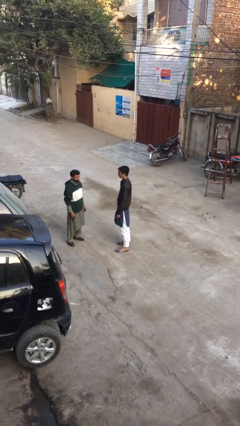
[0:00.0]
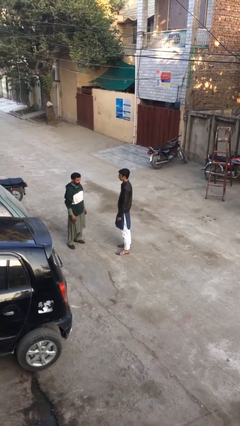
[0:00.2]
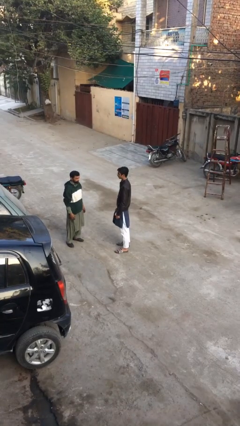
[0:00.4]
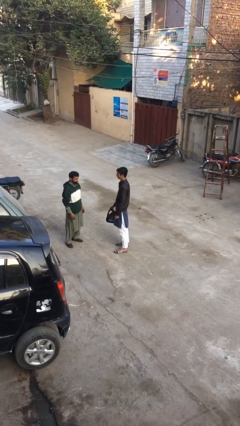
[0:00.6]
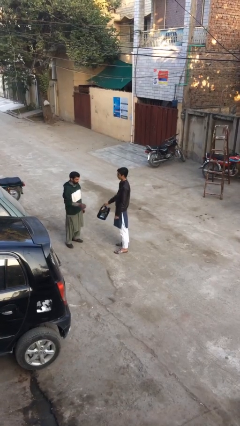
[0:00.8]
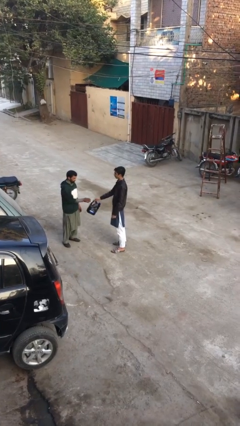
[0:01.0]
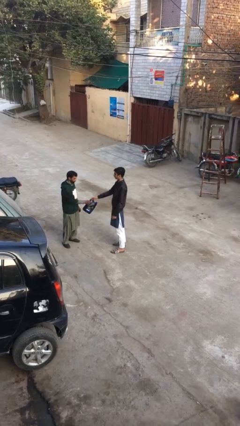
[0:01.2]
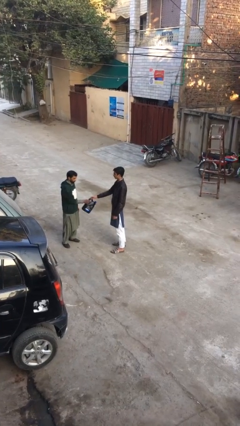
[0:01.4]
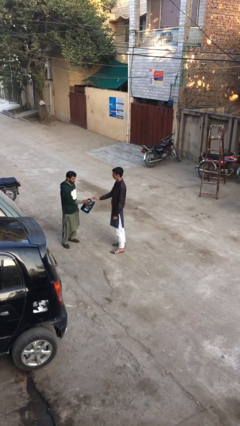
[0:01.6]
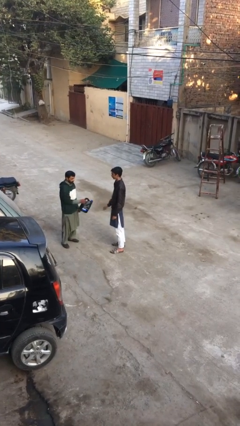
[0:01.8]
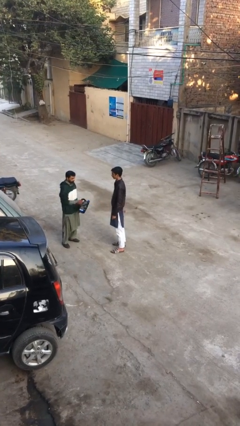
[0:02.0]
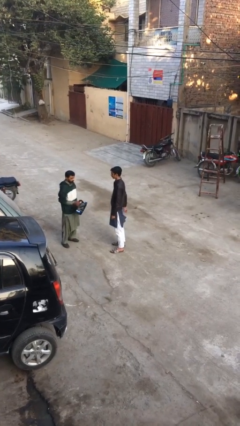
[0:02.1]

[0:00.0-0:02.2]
person transfers object to person

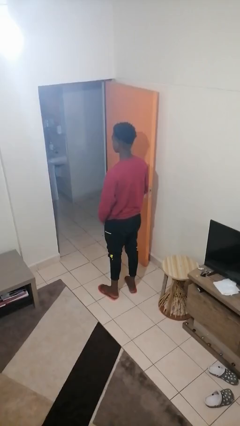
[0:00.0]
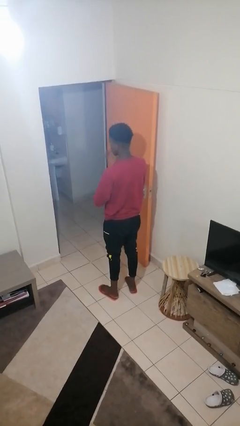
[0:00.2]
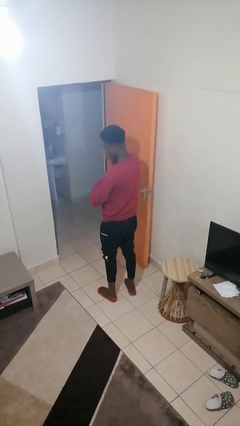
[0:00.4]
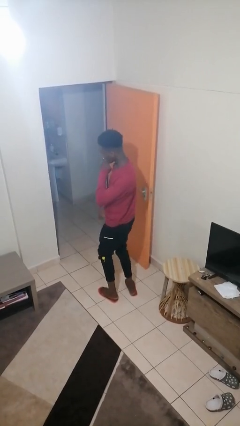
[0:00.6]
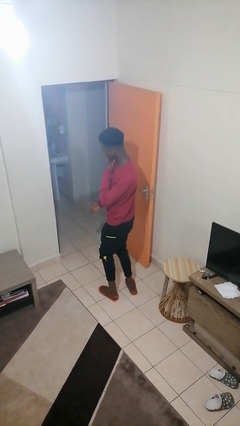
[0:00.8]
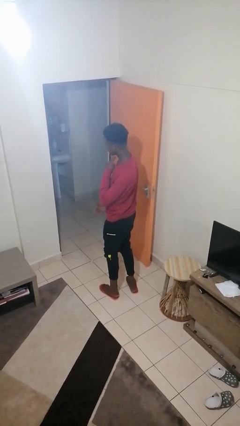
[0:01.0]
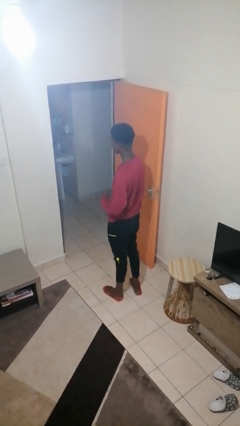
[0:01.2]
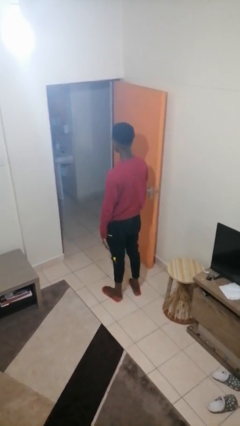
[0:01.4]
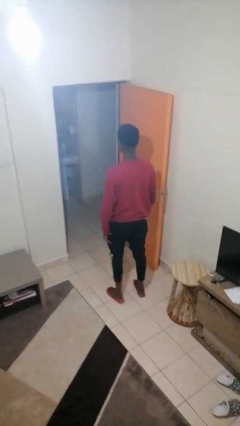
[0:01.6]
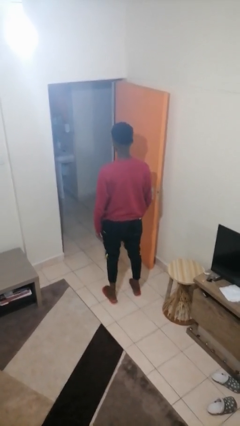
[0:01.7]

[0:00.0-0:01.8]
person karate chop

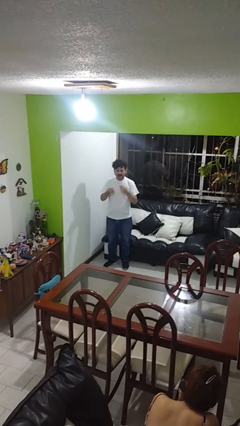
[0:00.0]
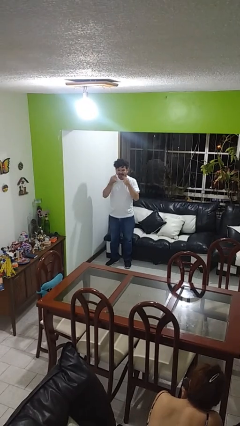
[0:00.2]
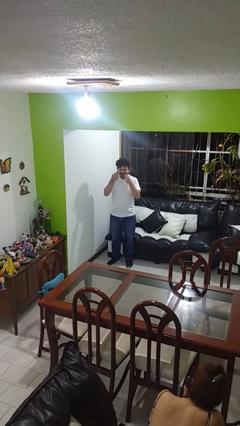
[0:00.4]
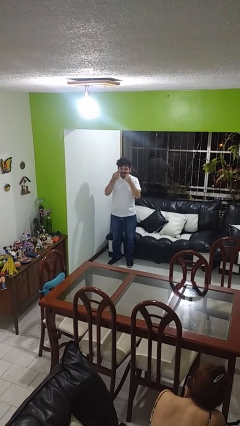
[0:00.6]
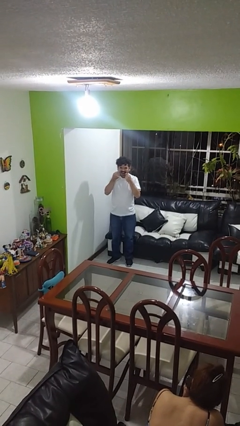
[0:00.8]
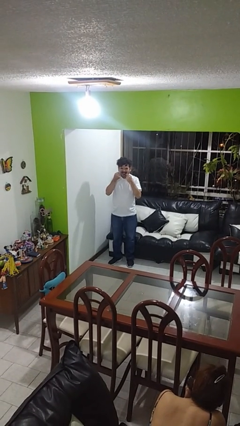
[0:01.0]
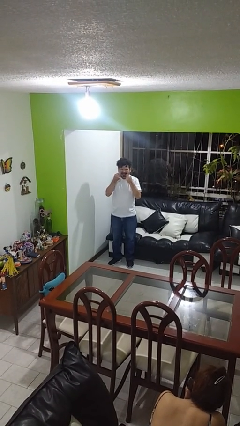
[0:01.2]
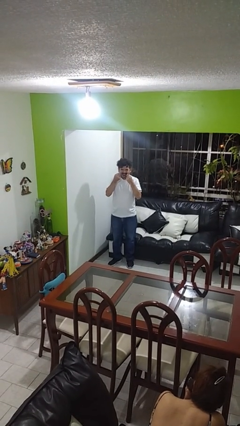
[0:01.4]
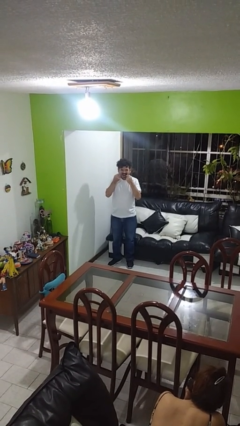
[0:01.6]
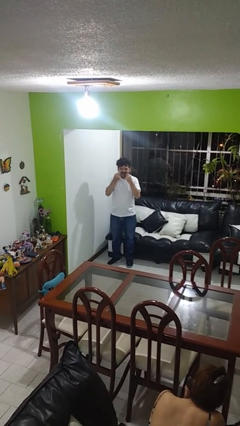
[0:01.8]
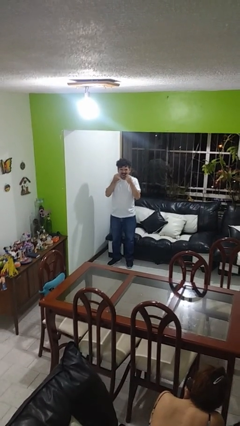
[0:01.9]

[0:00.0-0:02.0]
person flosses

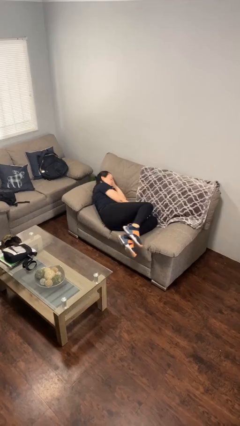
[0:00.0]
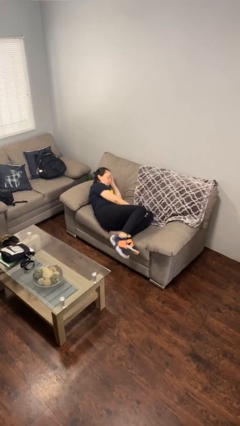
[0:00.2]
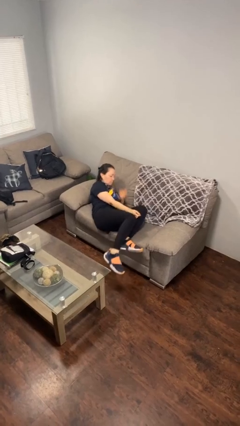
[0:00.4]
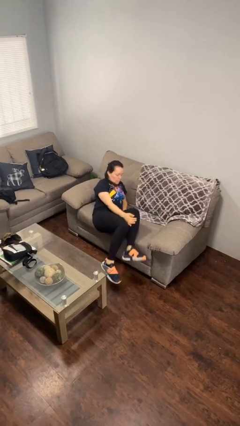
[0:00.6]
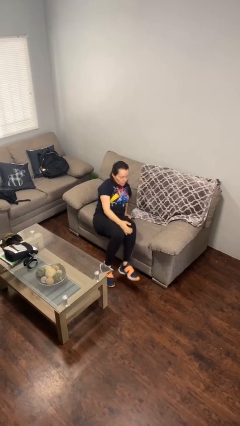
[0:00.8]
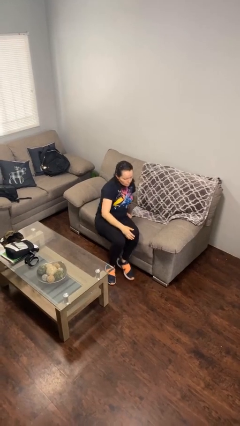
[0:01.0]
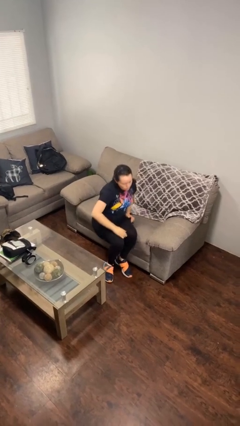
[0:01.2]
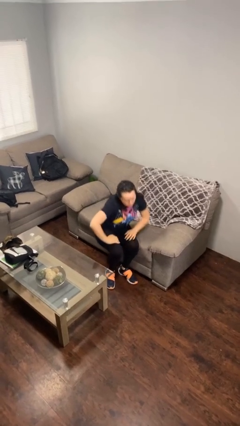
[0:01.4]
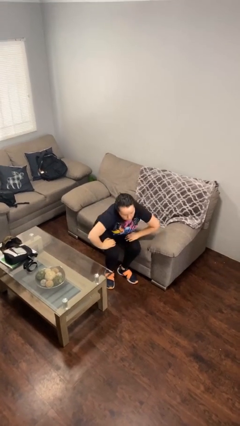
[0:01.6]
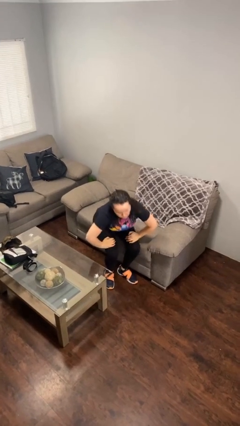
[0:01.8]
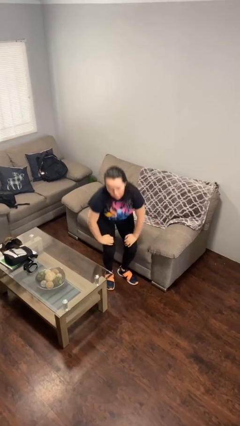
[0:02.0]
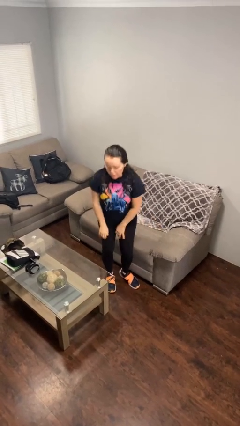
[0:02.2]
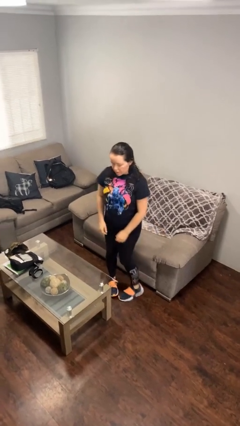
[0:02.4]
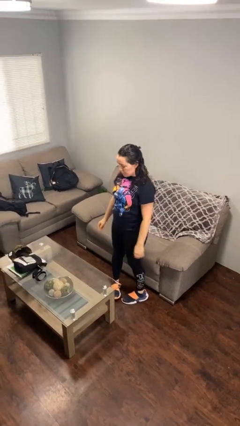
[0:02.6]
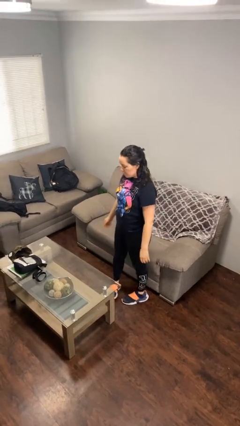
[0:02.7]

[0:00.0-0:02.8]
person stands up

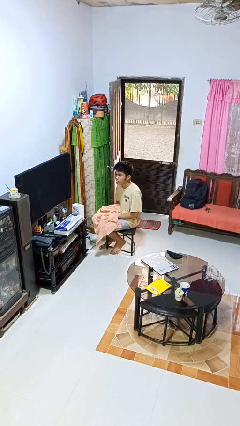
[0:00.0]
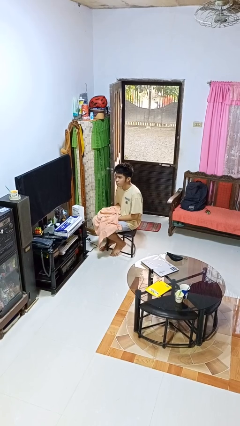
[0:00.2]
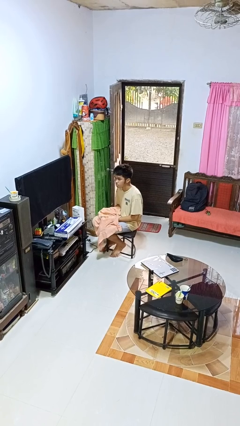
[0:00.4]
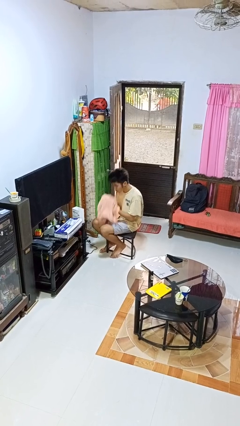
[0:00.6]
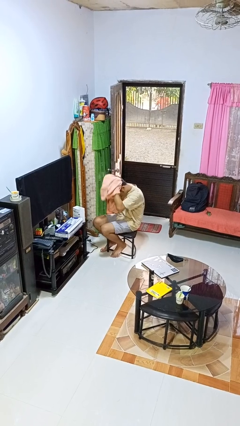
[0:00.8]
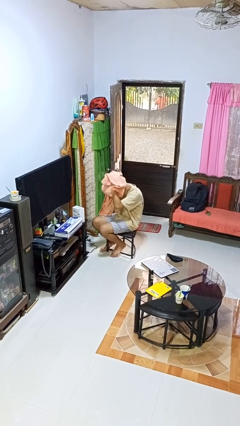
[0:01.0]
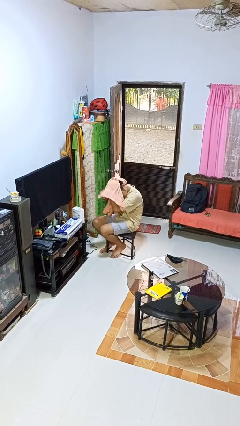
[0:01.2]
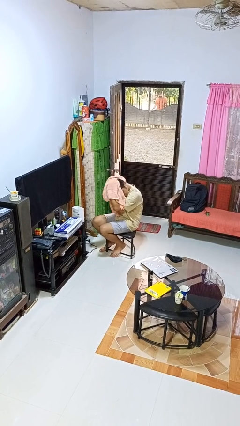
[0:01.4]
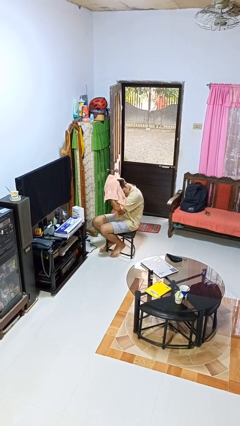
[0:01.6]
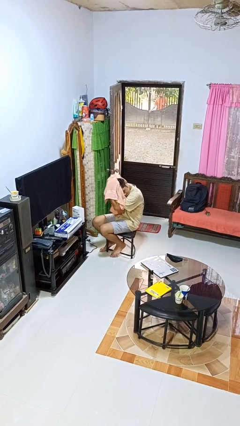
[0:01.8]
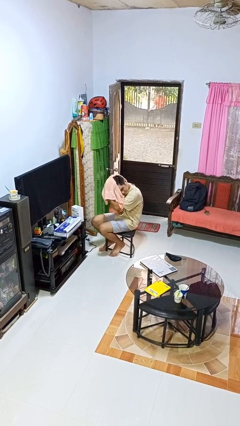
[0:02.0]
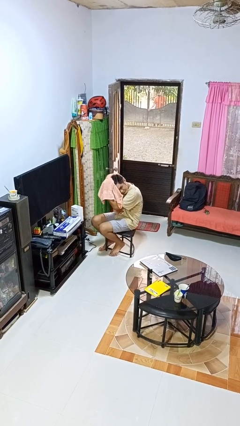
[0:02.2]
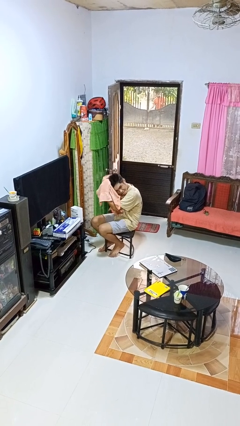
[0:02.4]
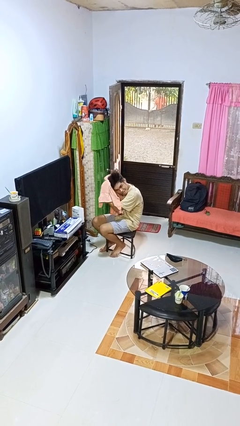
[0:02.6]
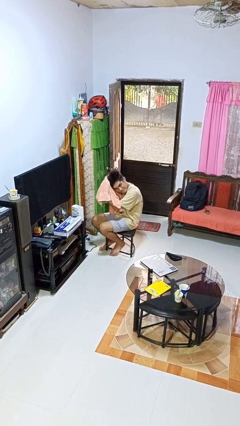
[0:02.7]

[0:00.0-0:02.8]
person dries hair with towel

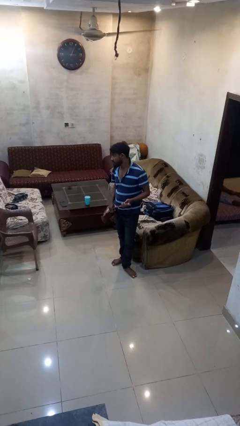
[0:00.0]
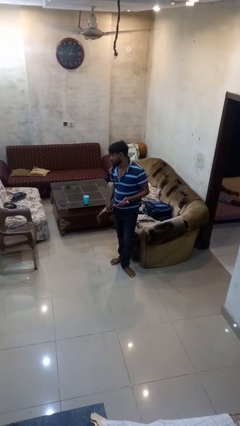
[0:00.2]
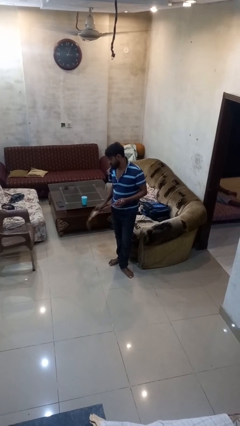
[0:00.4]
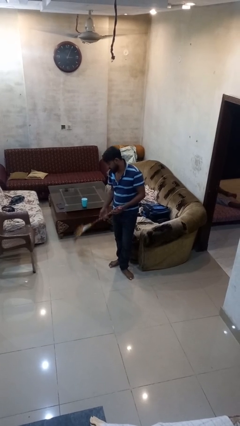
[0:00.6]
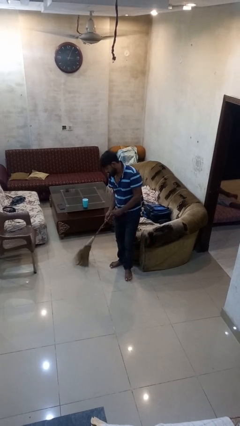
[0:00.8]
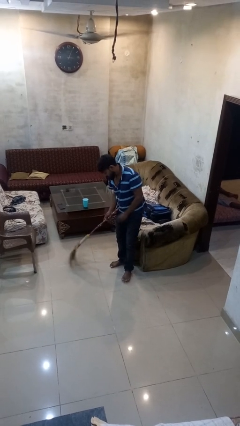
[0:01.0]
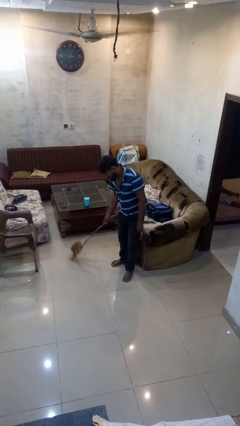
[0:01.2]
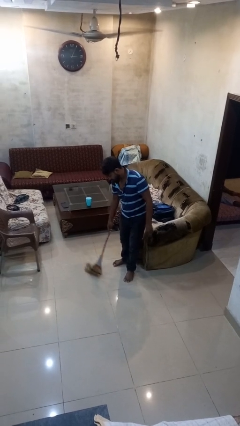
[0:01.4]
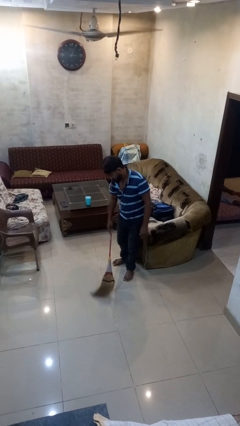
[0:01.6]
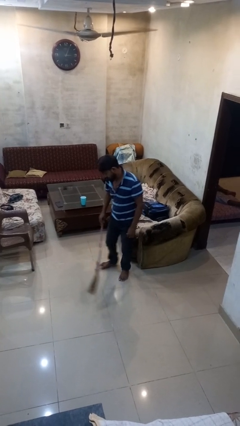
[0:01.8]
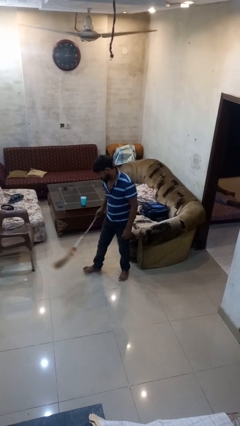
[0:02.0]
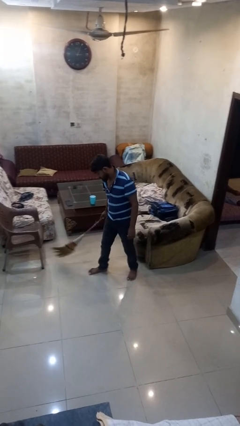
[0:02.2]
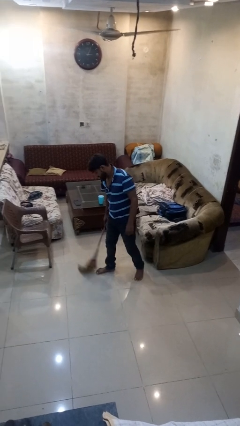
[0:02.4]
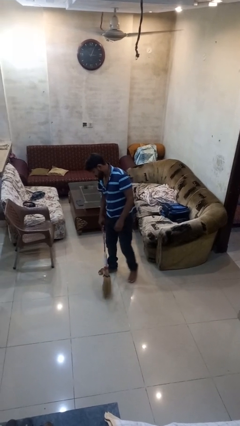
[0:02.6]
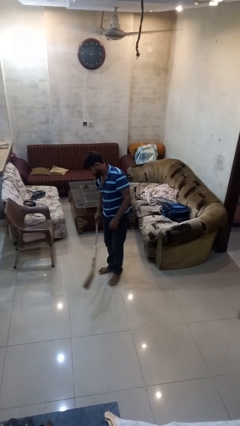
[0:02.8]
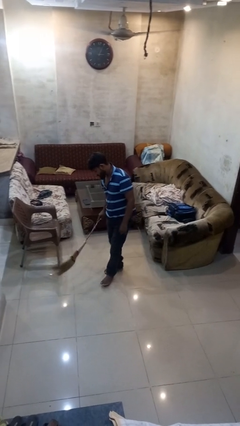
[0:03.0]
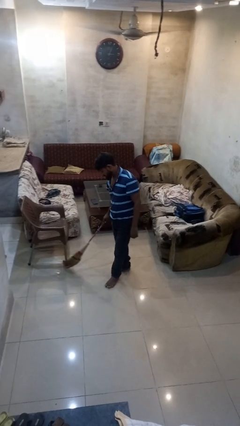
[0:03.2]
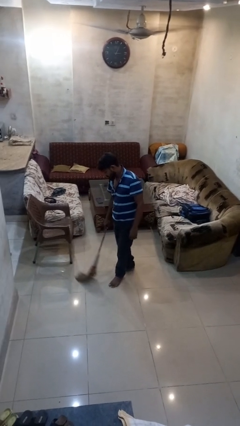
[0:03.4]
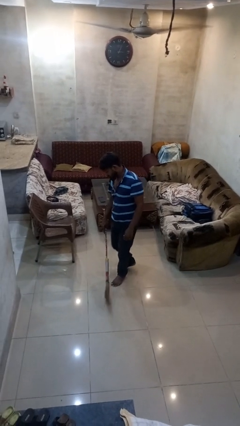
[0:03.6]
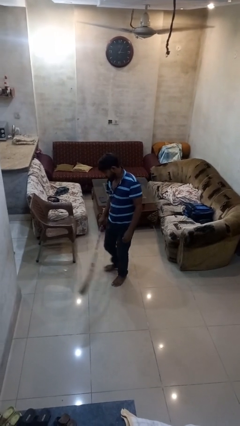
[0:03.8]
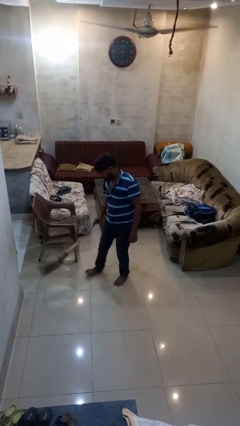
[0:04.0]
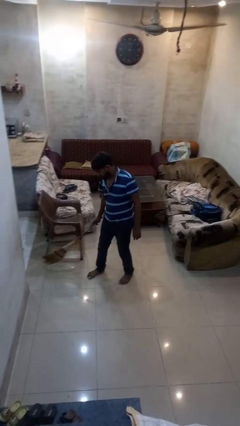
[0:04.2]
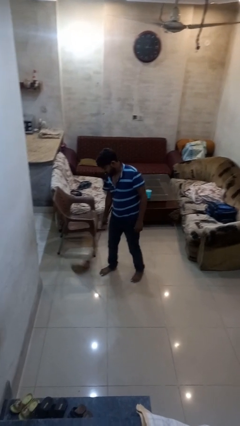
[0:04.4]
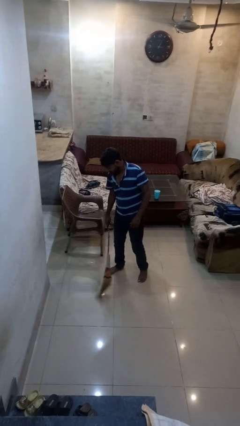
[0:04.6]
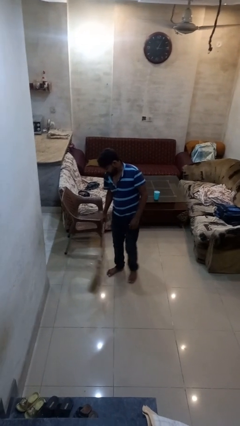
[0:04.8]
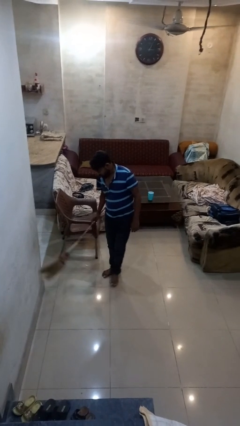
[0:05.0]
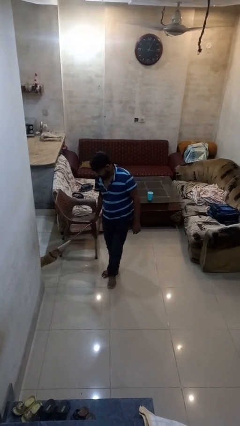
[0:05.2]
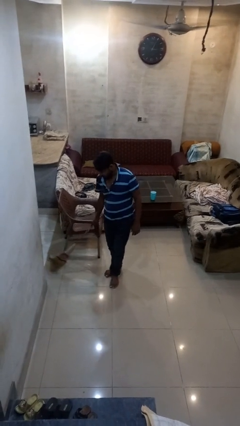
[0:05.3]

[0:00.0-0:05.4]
person sweeps floor

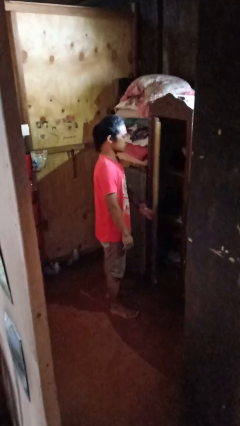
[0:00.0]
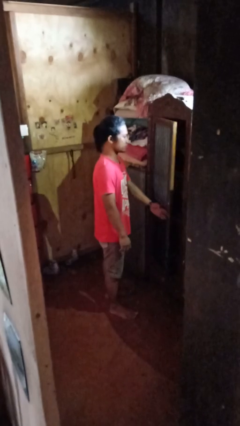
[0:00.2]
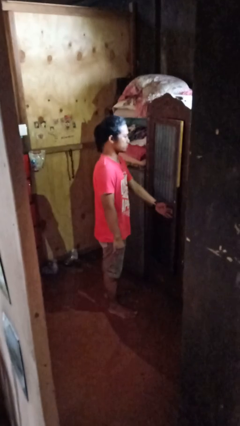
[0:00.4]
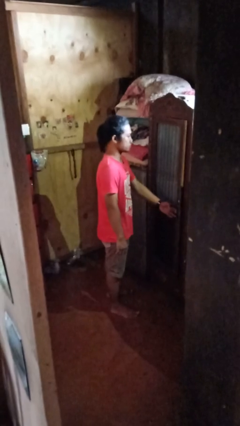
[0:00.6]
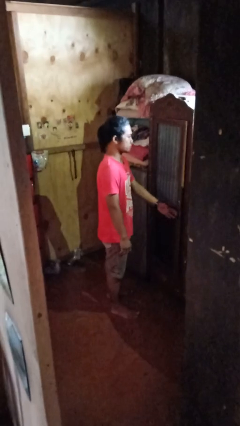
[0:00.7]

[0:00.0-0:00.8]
person closes closet door
